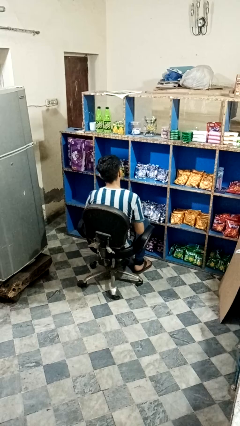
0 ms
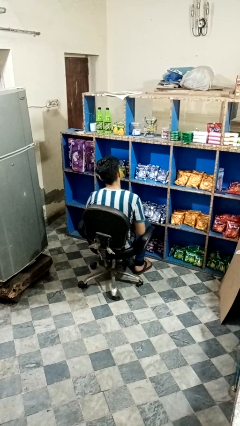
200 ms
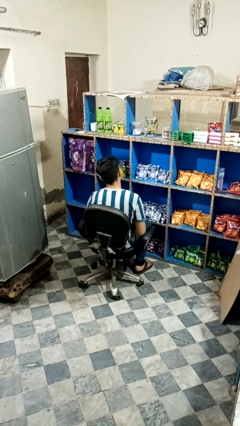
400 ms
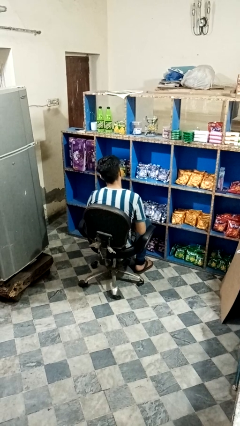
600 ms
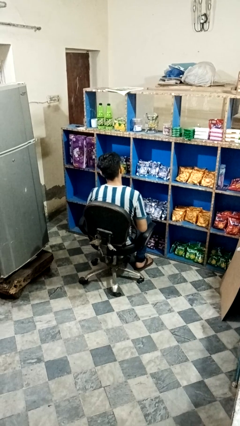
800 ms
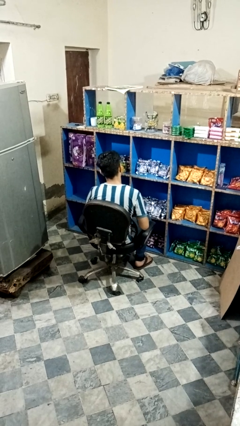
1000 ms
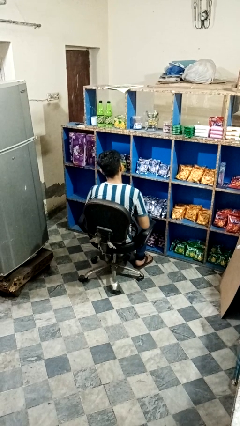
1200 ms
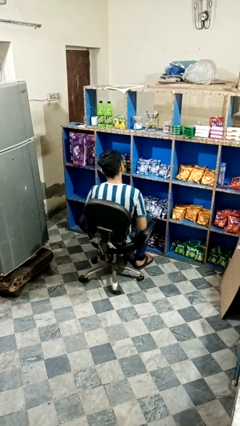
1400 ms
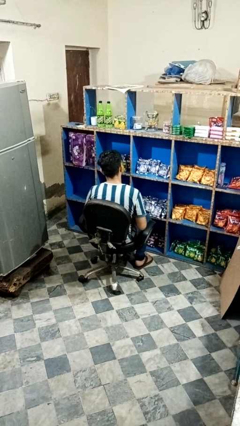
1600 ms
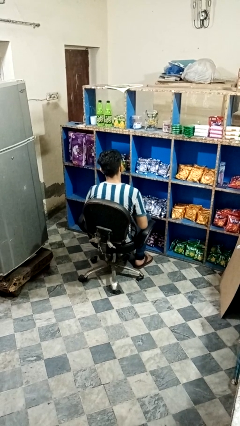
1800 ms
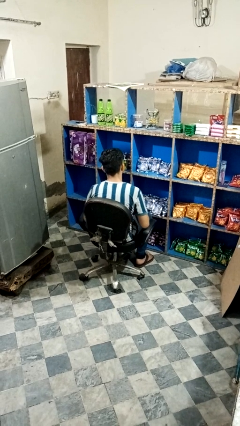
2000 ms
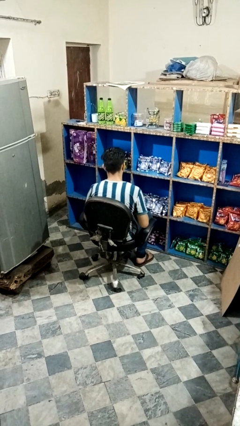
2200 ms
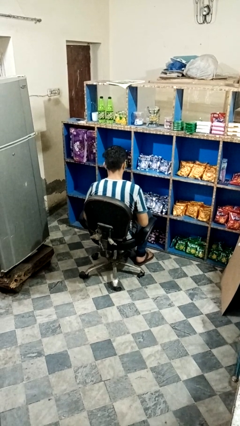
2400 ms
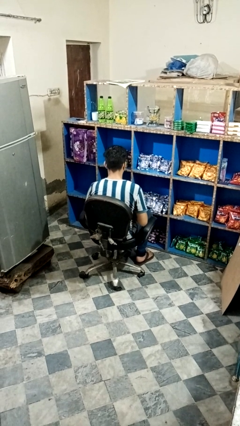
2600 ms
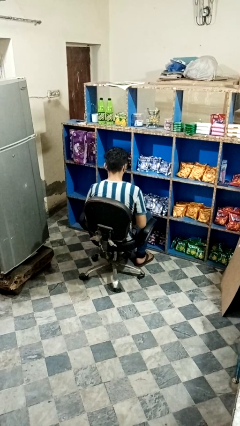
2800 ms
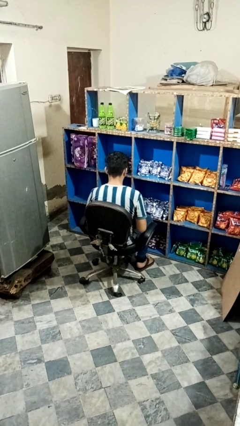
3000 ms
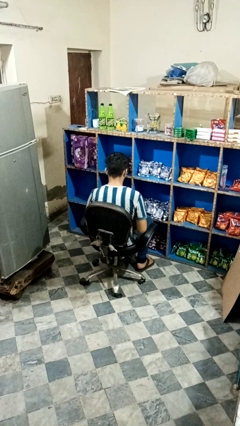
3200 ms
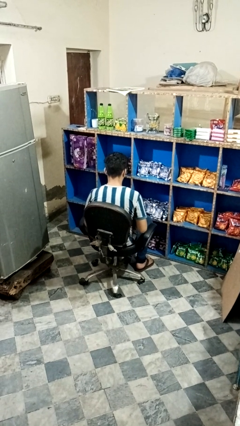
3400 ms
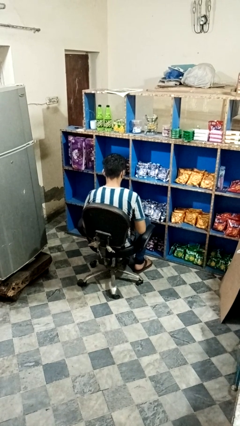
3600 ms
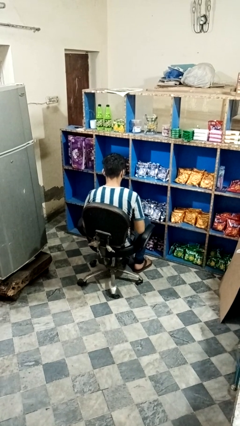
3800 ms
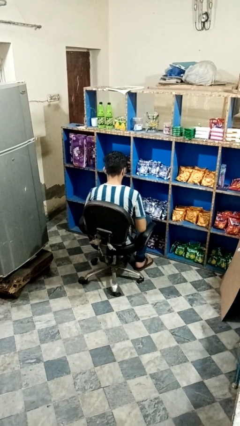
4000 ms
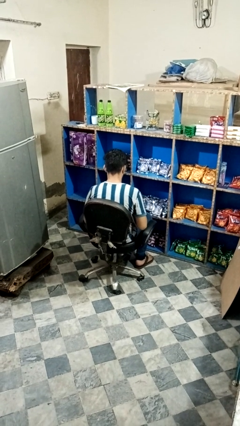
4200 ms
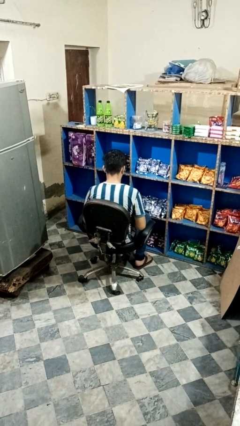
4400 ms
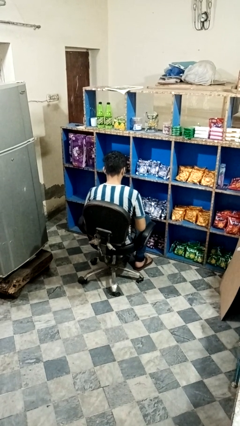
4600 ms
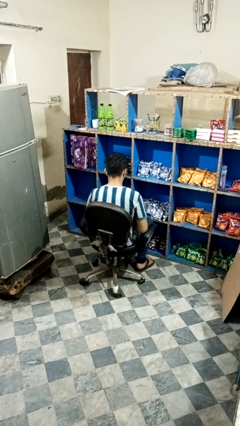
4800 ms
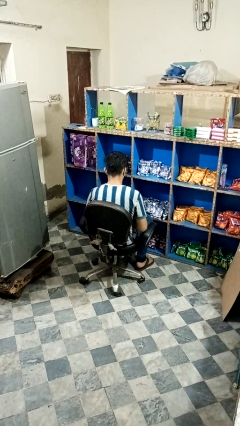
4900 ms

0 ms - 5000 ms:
person looks at hands in lap

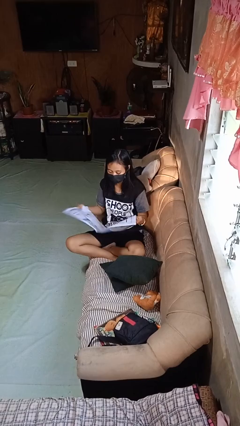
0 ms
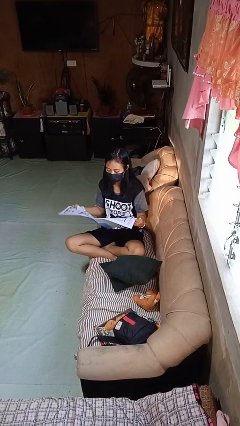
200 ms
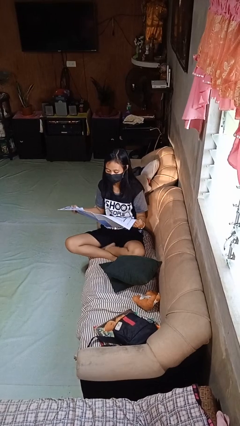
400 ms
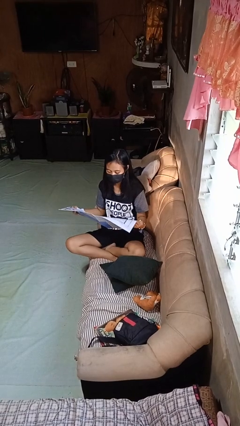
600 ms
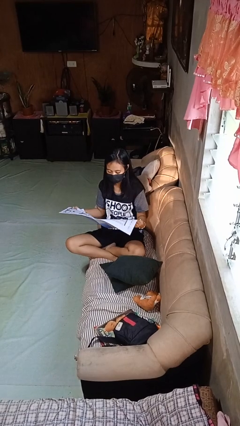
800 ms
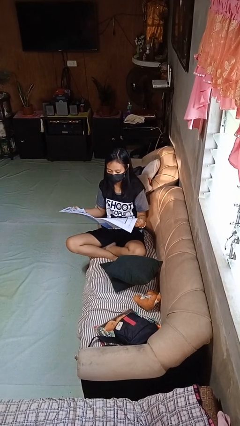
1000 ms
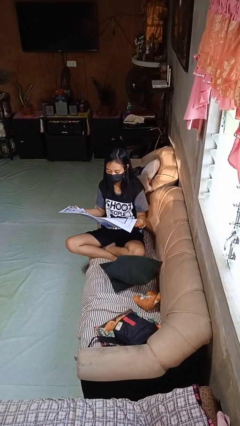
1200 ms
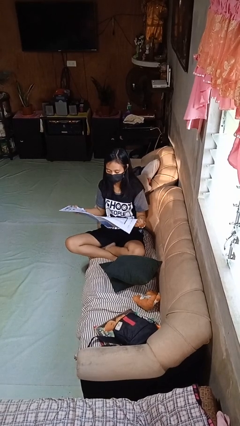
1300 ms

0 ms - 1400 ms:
person reads newspaper

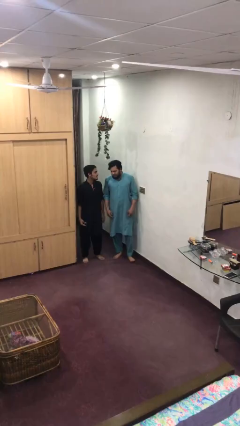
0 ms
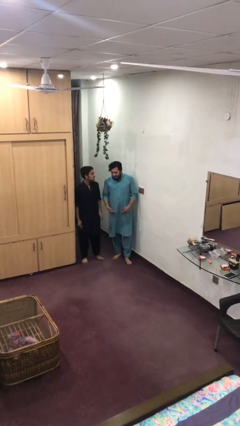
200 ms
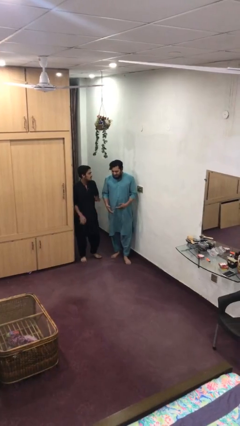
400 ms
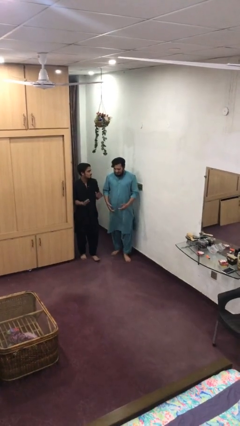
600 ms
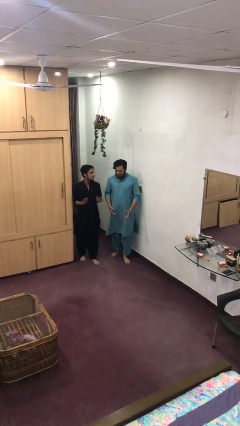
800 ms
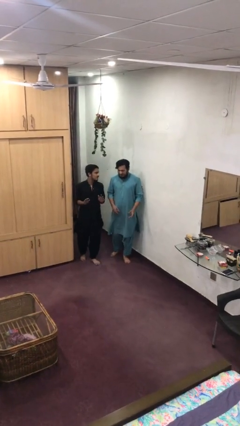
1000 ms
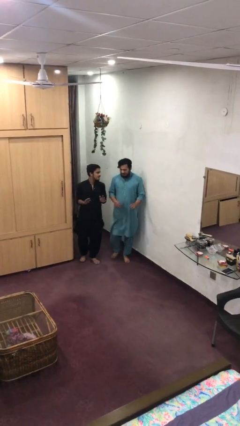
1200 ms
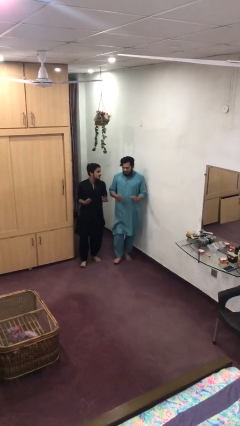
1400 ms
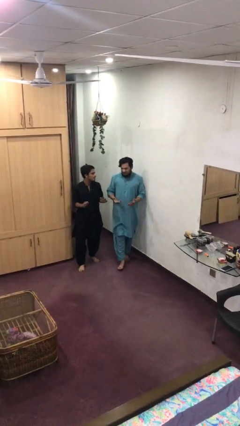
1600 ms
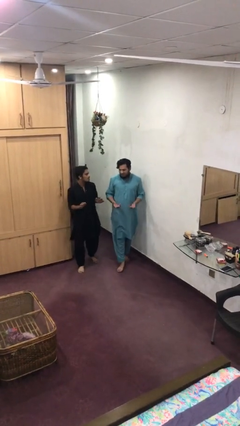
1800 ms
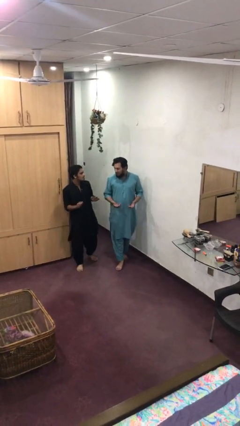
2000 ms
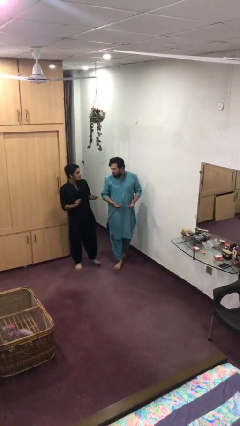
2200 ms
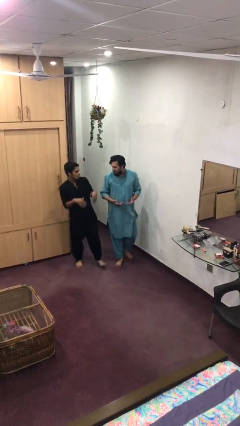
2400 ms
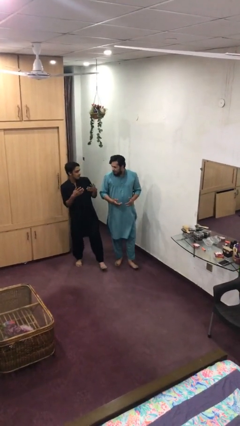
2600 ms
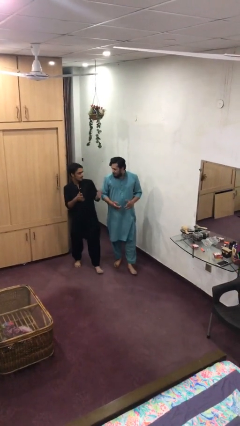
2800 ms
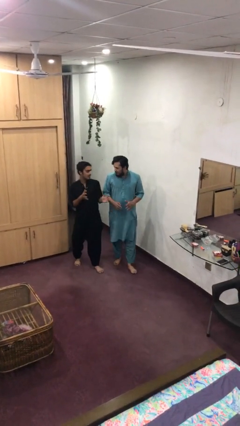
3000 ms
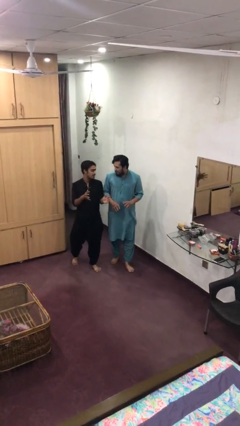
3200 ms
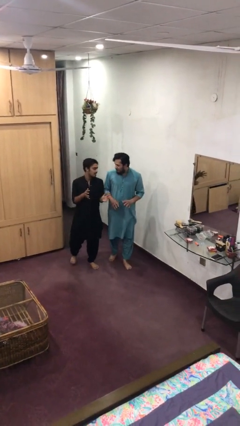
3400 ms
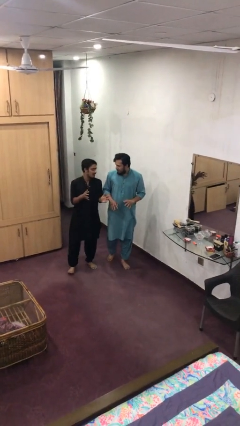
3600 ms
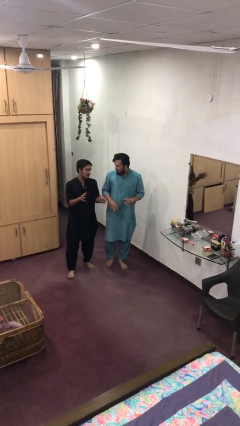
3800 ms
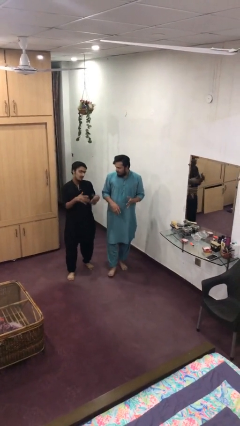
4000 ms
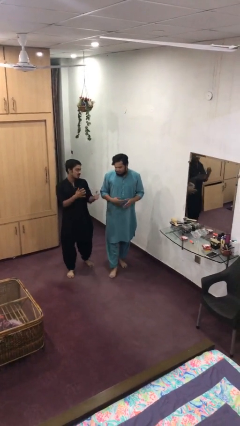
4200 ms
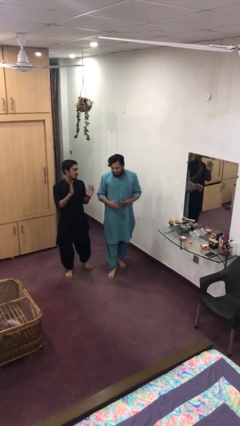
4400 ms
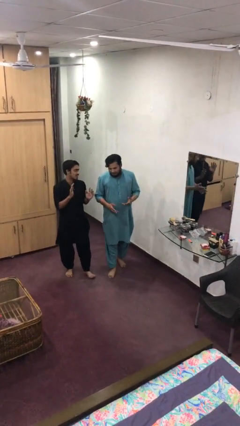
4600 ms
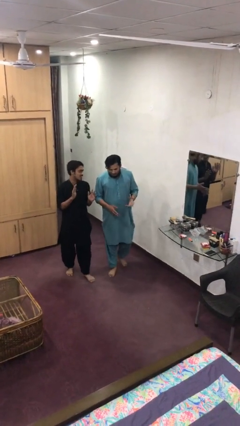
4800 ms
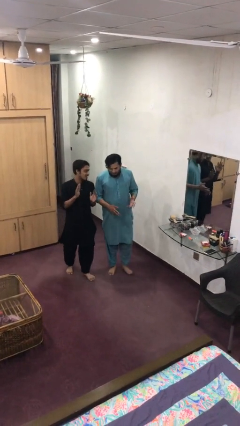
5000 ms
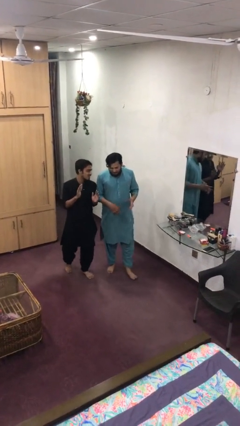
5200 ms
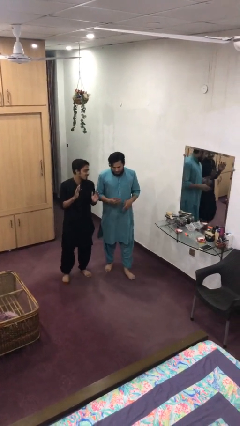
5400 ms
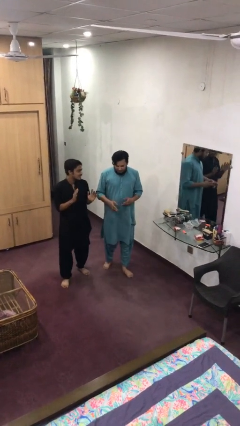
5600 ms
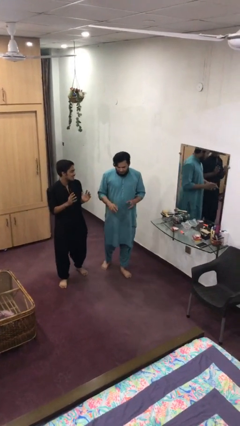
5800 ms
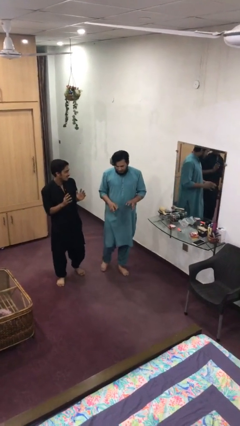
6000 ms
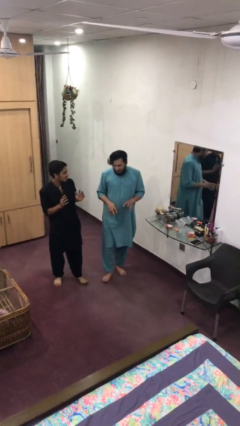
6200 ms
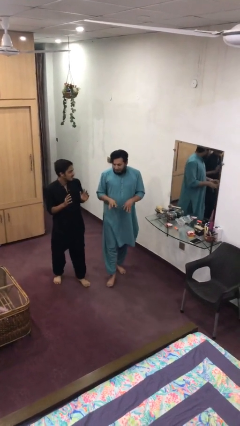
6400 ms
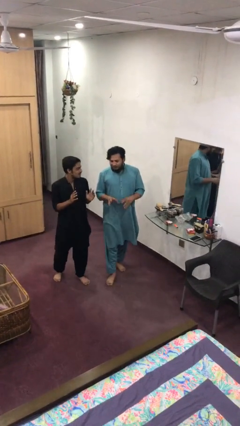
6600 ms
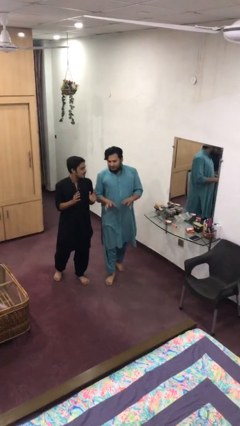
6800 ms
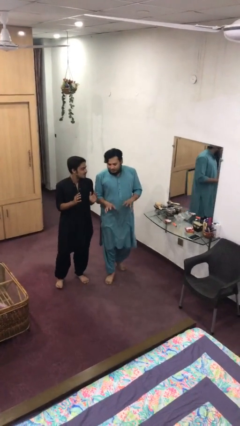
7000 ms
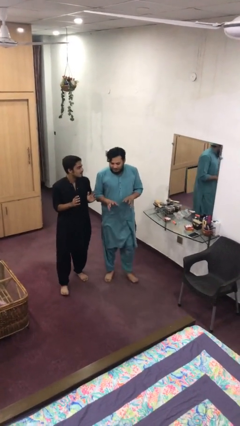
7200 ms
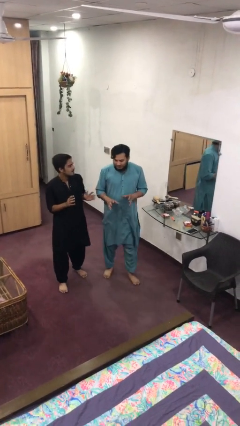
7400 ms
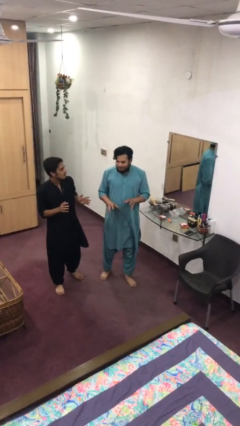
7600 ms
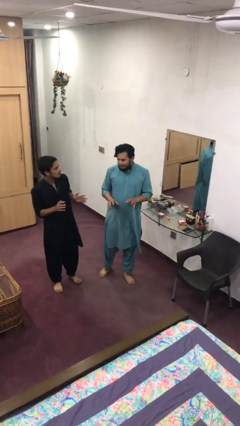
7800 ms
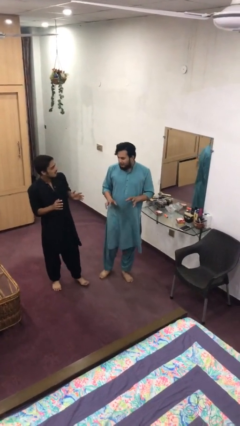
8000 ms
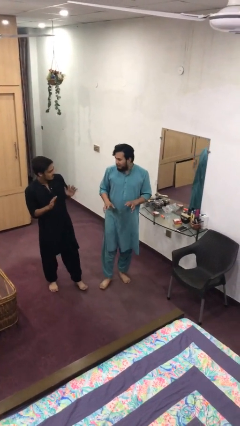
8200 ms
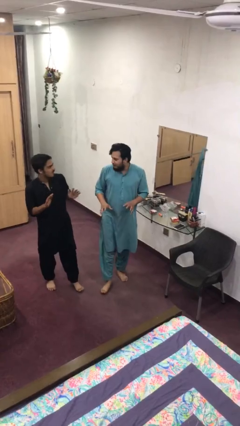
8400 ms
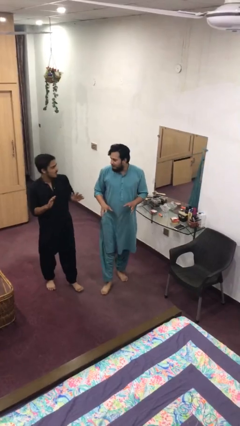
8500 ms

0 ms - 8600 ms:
person talks to person

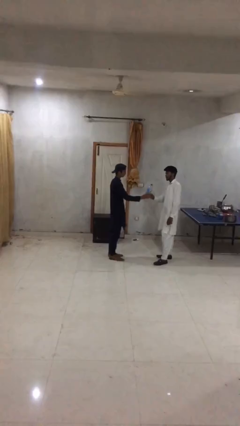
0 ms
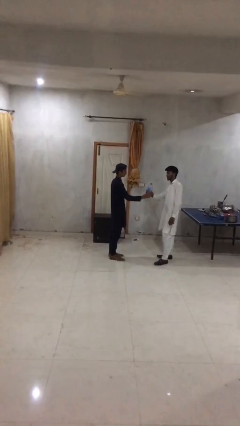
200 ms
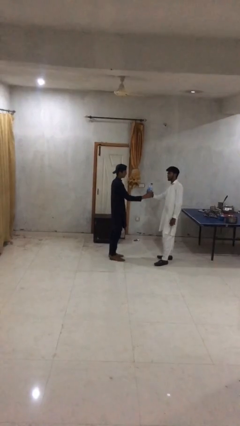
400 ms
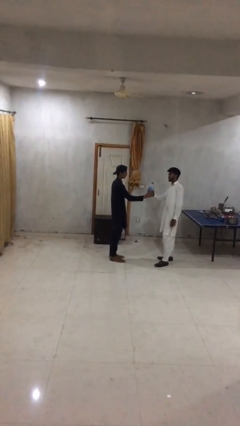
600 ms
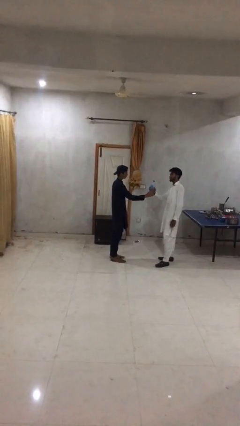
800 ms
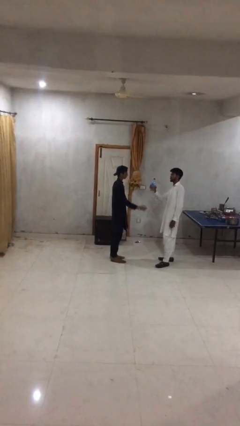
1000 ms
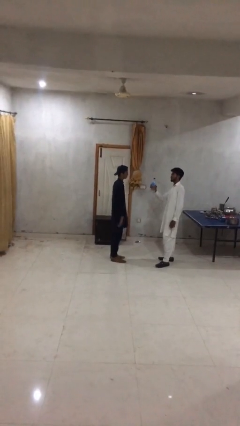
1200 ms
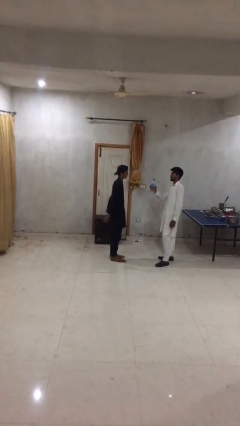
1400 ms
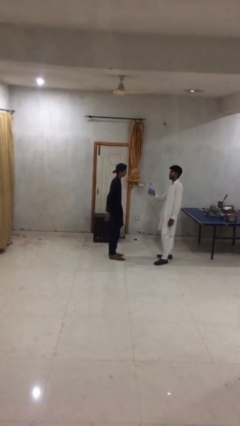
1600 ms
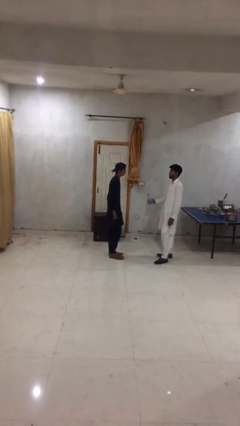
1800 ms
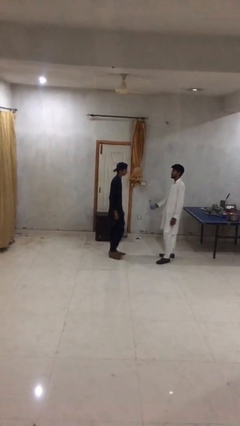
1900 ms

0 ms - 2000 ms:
person transfers object to person

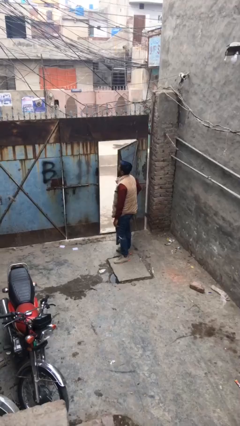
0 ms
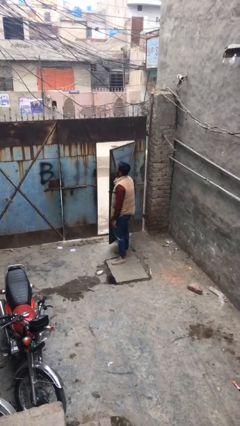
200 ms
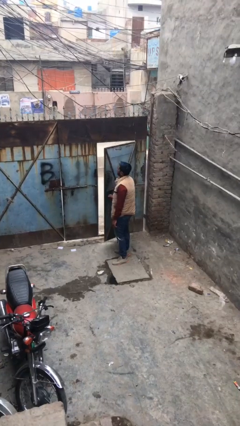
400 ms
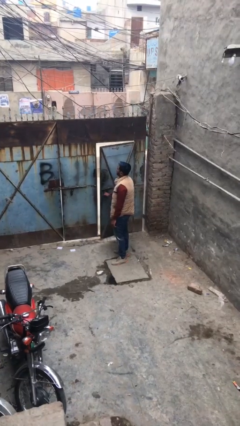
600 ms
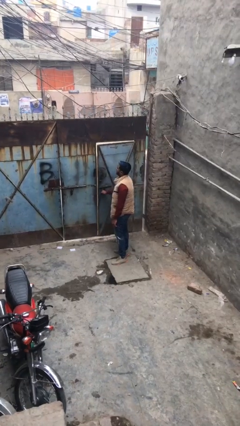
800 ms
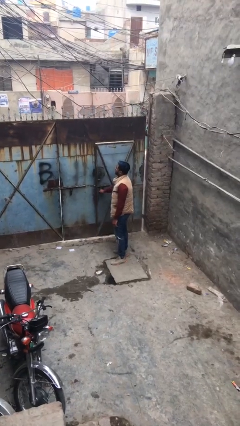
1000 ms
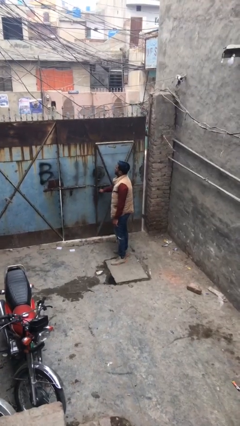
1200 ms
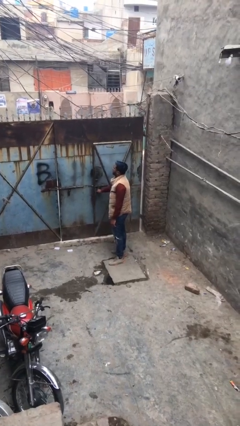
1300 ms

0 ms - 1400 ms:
person closes facility door
